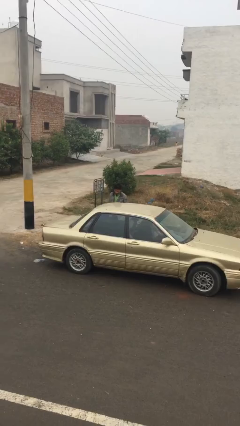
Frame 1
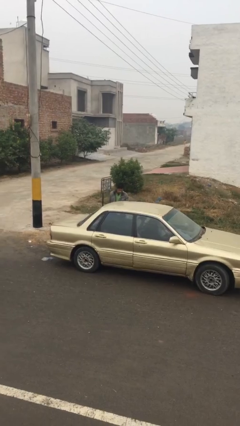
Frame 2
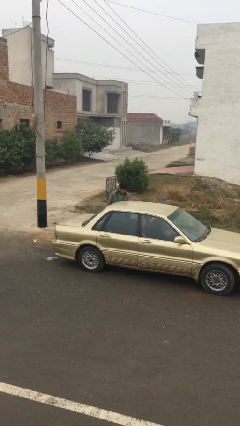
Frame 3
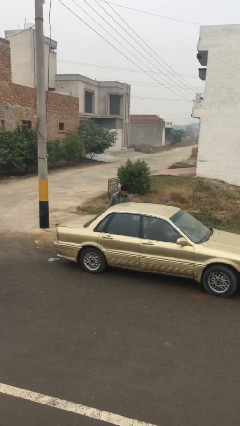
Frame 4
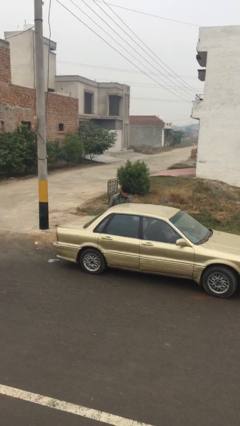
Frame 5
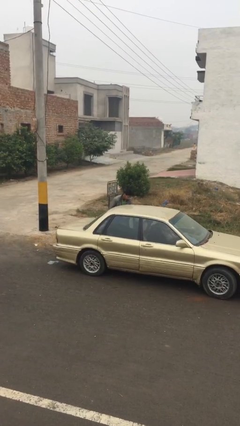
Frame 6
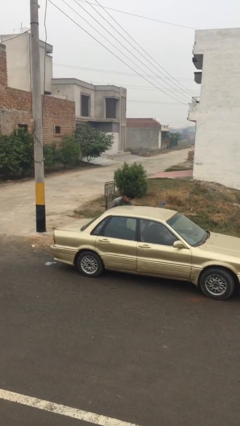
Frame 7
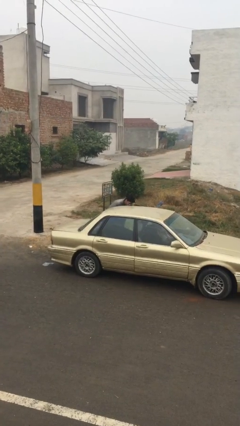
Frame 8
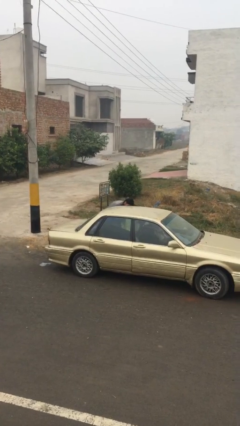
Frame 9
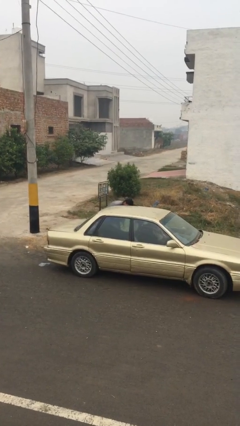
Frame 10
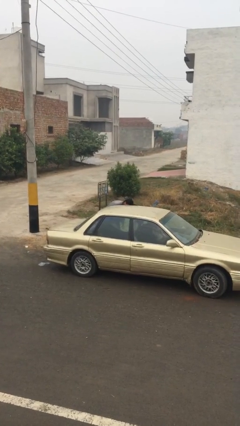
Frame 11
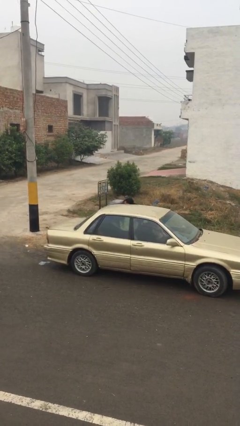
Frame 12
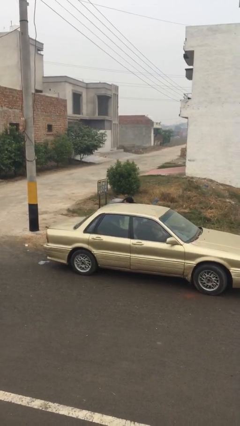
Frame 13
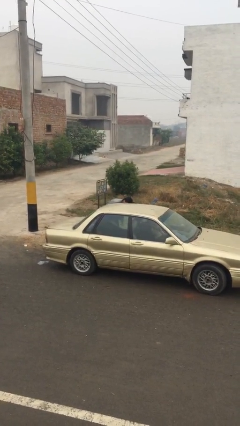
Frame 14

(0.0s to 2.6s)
person opens car door

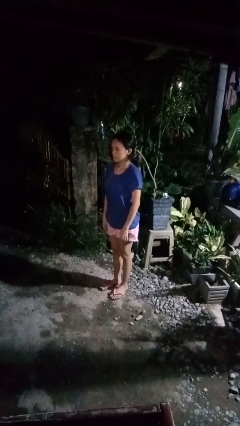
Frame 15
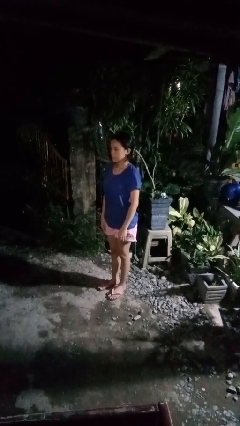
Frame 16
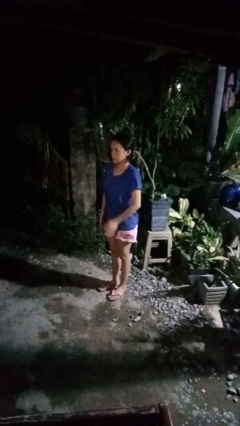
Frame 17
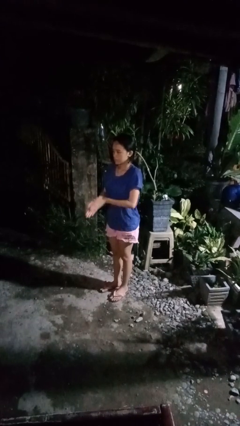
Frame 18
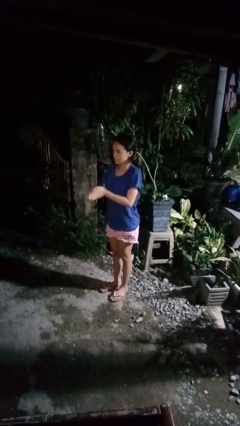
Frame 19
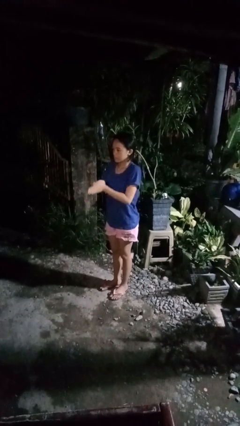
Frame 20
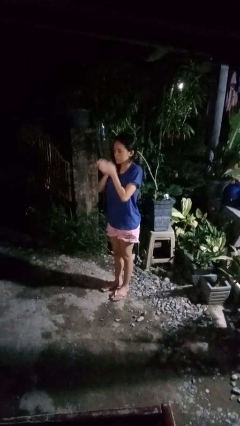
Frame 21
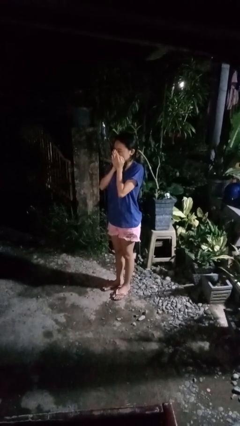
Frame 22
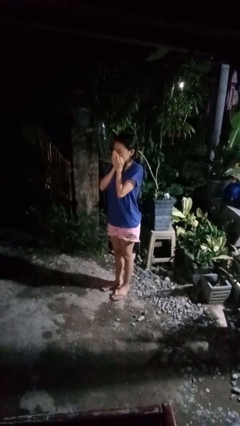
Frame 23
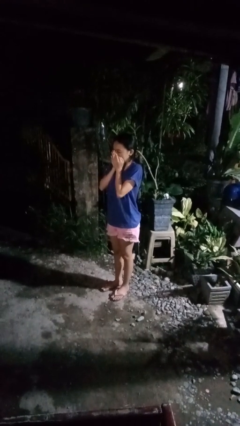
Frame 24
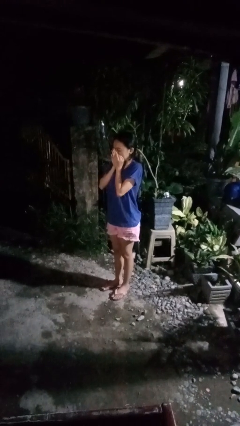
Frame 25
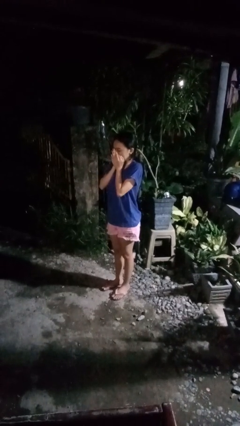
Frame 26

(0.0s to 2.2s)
person blows into hands

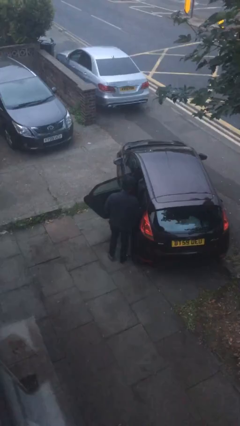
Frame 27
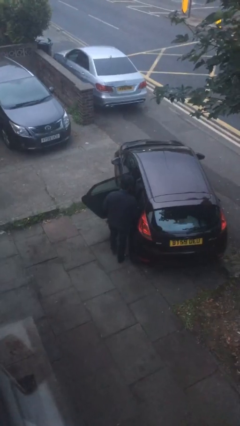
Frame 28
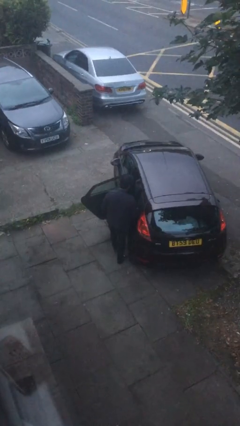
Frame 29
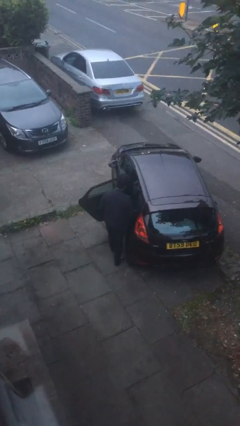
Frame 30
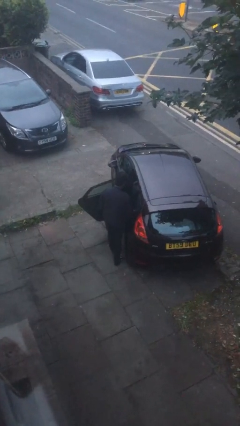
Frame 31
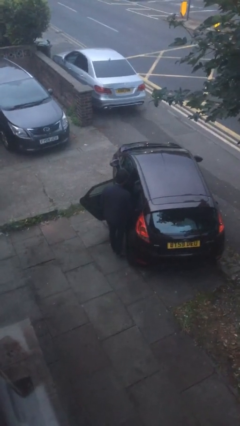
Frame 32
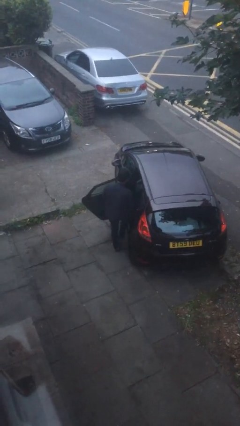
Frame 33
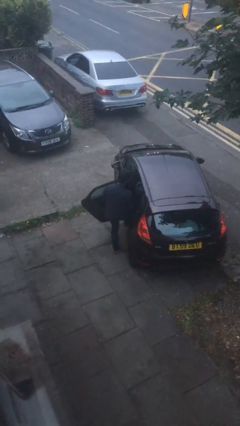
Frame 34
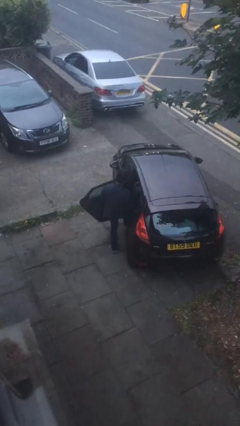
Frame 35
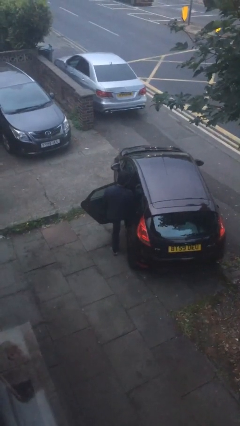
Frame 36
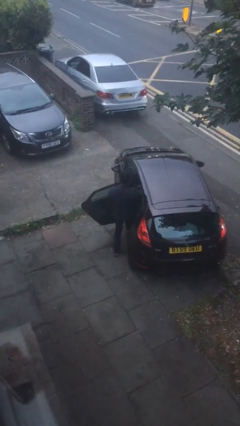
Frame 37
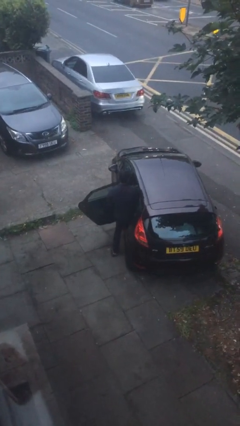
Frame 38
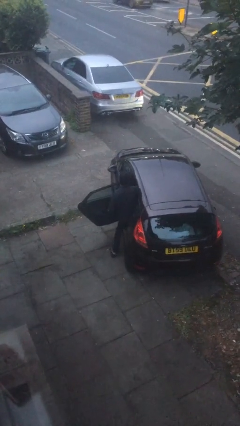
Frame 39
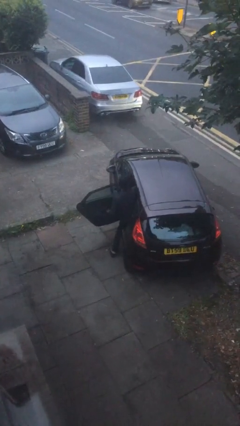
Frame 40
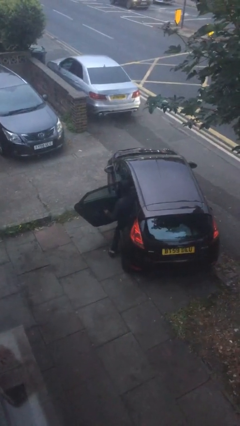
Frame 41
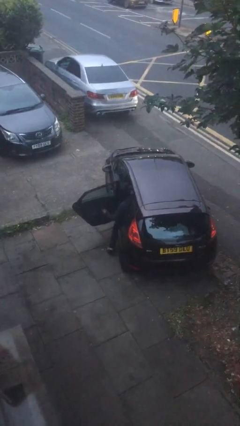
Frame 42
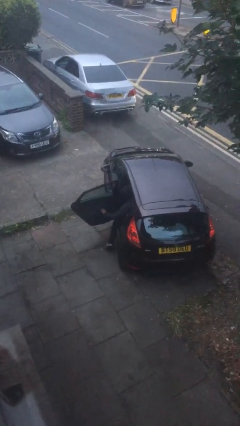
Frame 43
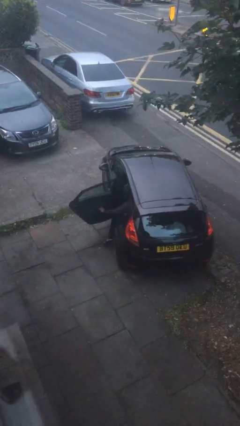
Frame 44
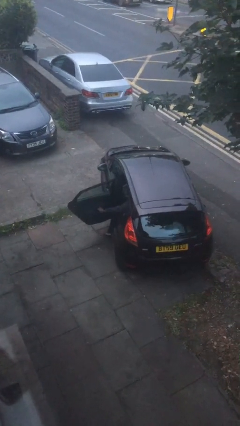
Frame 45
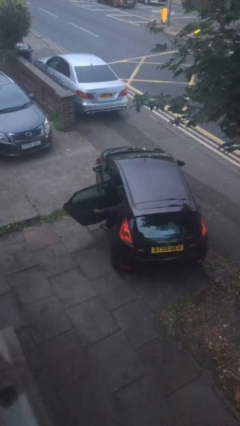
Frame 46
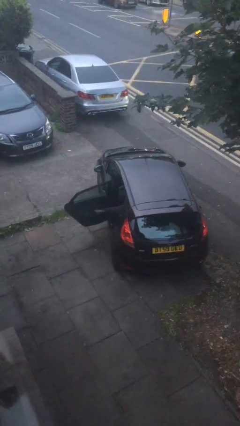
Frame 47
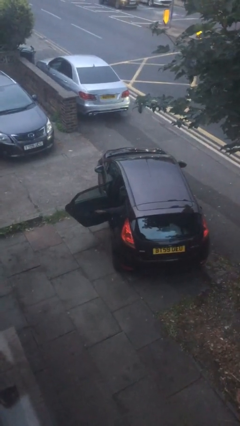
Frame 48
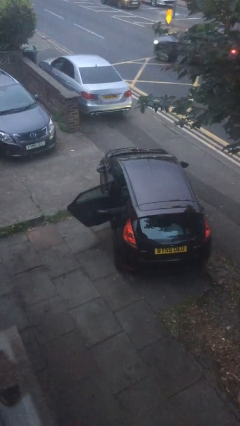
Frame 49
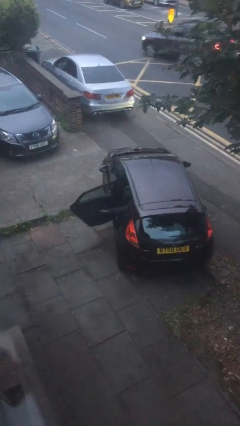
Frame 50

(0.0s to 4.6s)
person enters car

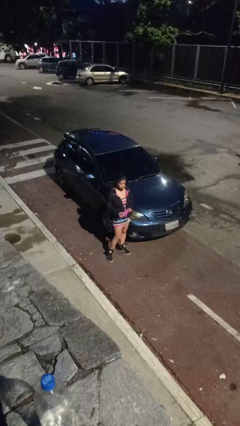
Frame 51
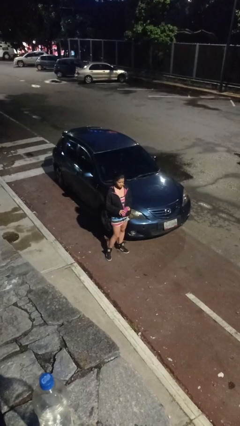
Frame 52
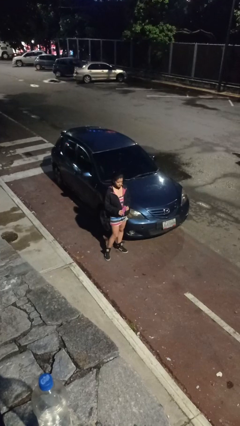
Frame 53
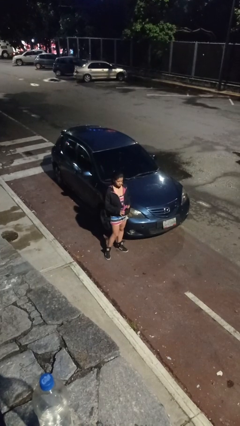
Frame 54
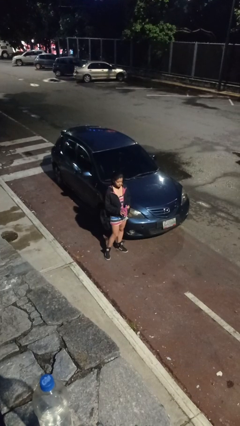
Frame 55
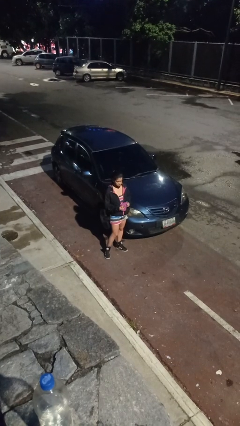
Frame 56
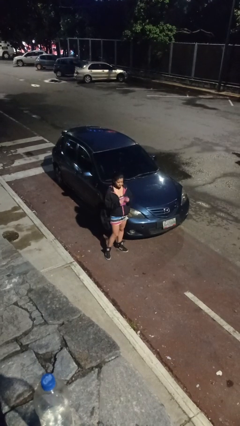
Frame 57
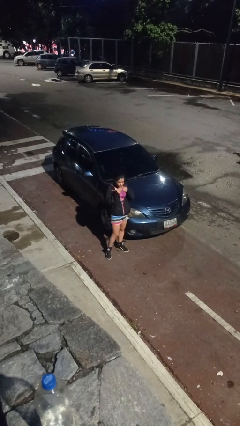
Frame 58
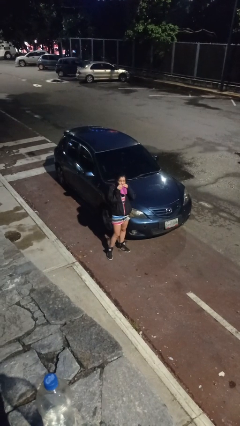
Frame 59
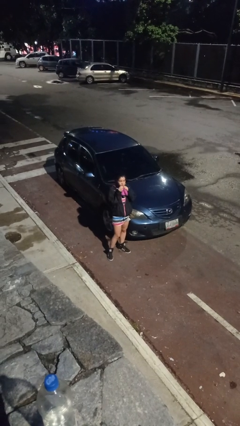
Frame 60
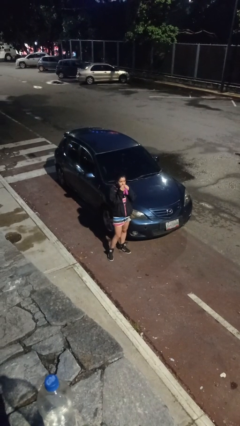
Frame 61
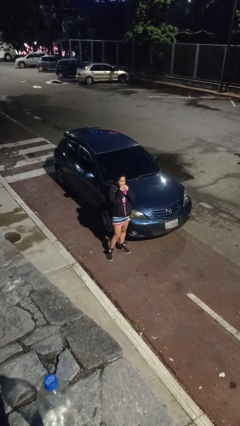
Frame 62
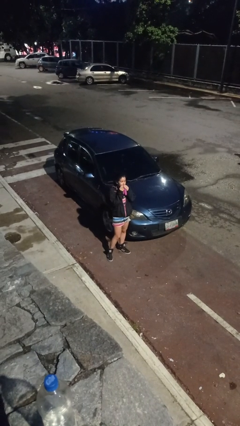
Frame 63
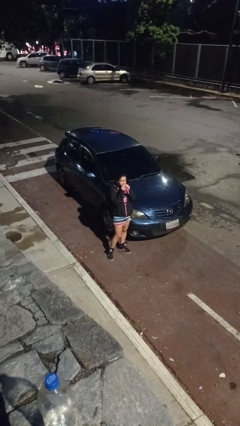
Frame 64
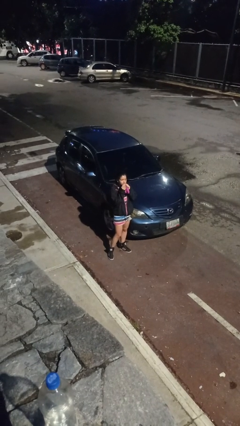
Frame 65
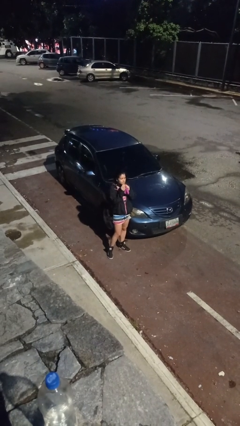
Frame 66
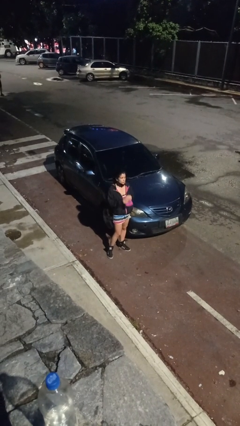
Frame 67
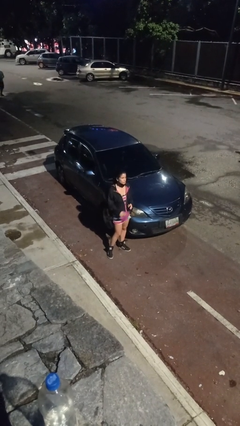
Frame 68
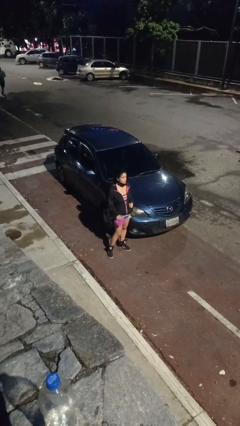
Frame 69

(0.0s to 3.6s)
person wipes mouth with napkin

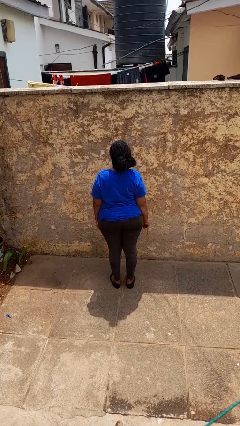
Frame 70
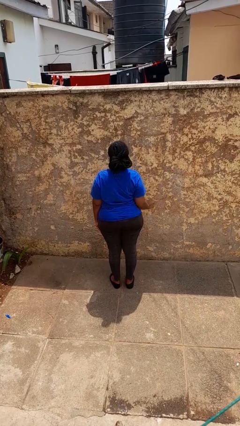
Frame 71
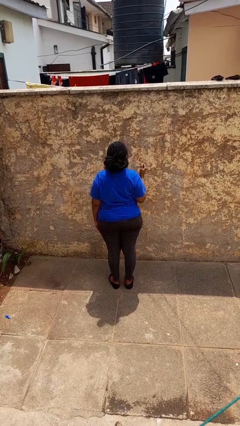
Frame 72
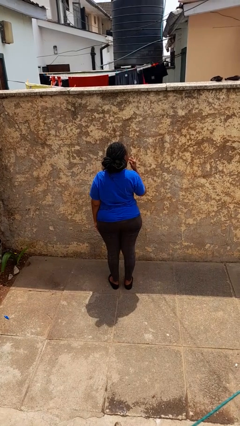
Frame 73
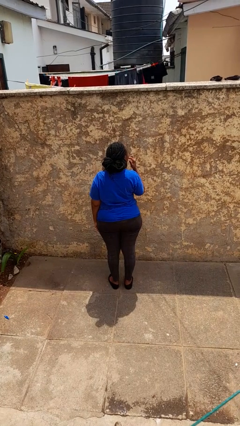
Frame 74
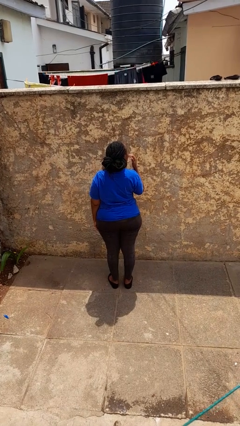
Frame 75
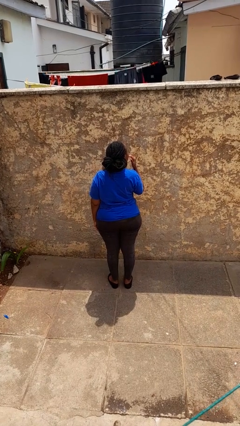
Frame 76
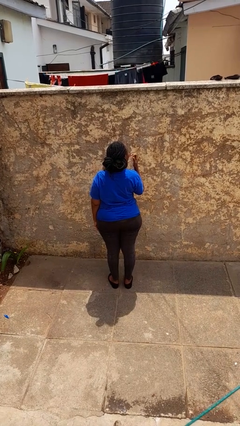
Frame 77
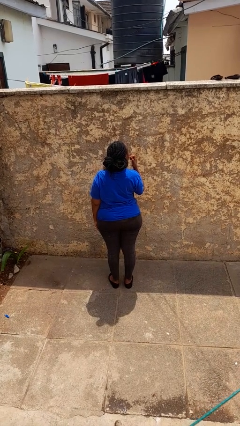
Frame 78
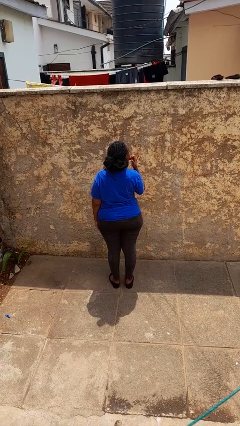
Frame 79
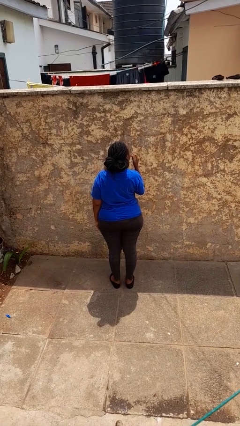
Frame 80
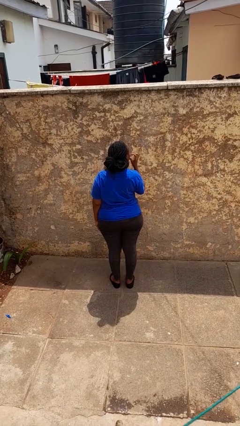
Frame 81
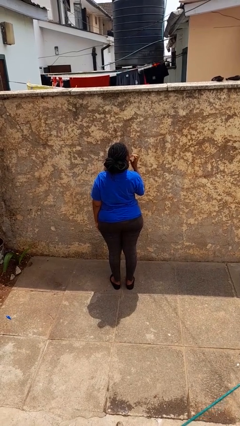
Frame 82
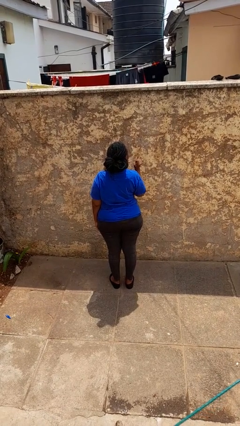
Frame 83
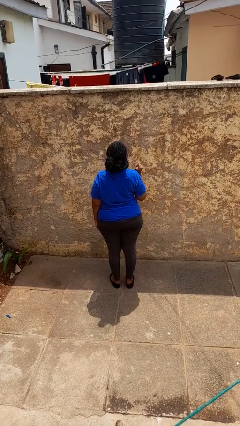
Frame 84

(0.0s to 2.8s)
person licks fingers

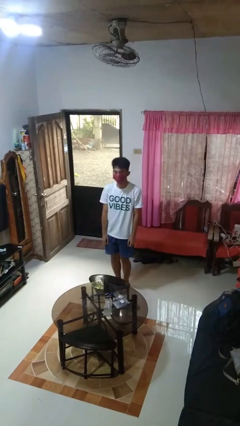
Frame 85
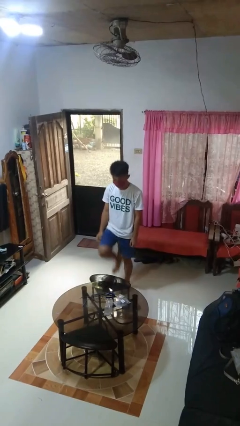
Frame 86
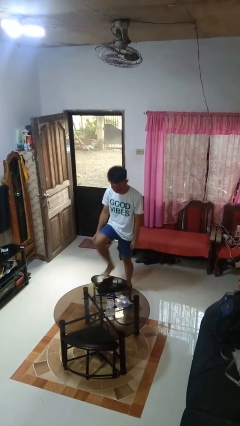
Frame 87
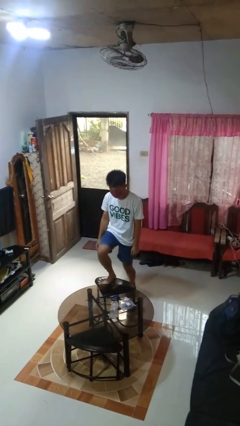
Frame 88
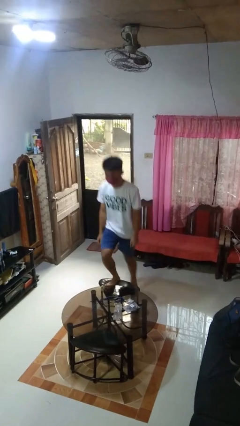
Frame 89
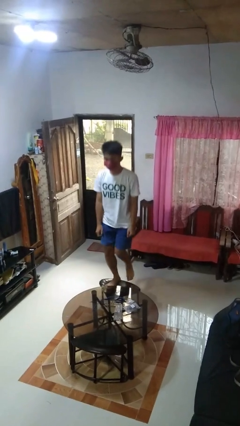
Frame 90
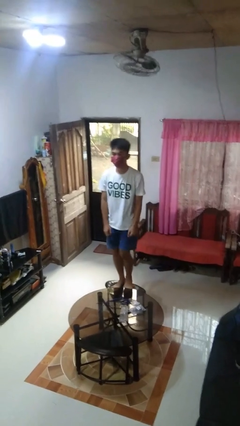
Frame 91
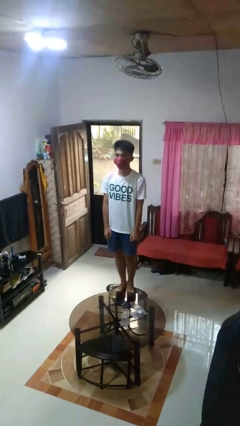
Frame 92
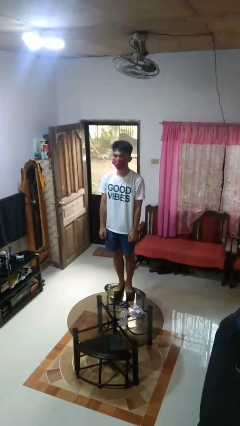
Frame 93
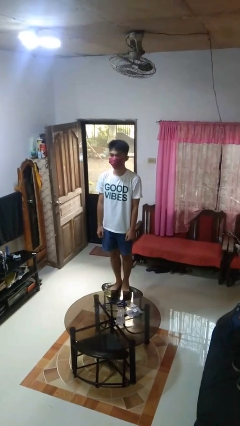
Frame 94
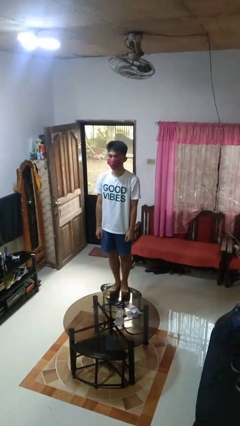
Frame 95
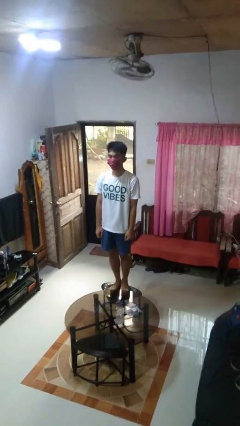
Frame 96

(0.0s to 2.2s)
person climbs on chair
